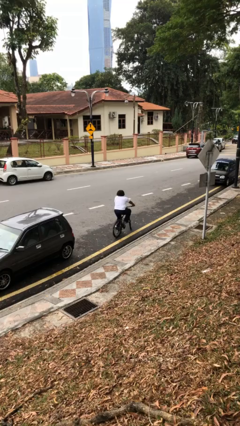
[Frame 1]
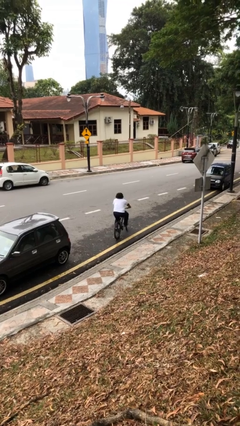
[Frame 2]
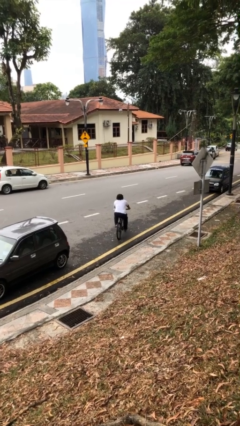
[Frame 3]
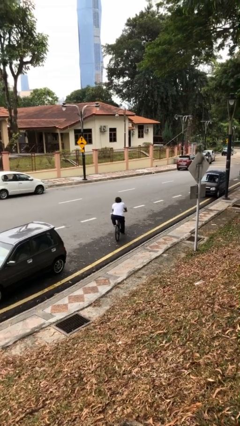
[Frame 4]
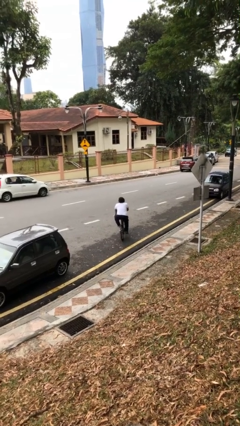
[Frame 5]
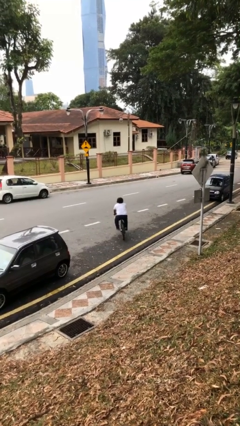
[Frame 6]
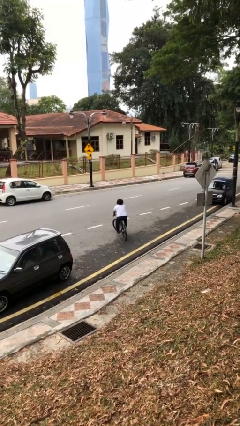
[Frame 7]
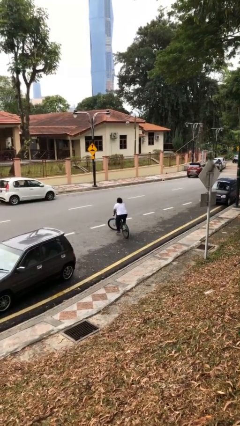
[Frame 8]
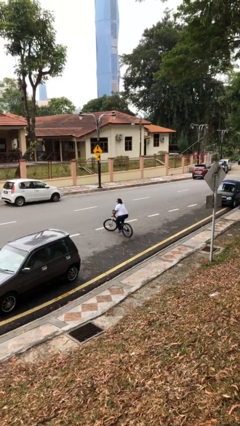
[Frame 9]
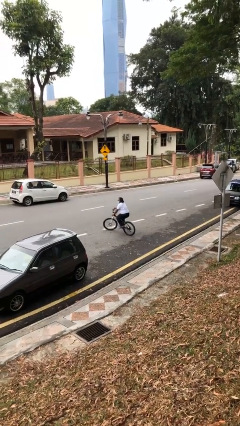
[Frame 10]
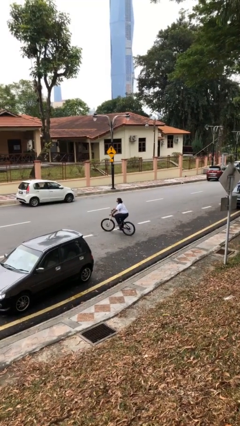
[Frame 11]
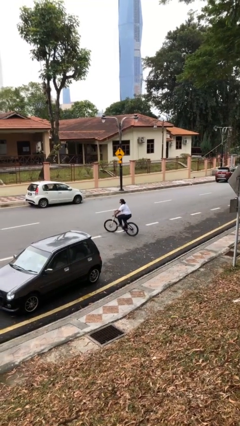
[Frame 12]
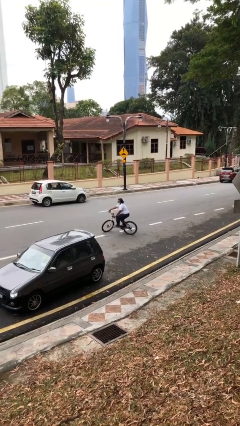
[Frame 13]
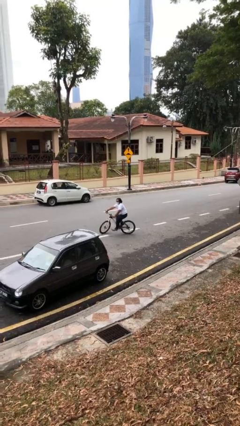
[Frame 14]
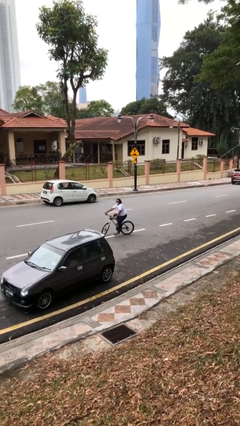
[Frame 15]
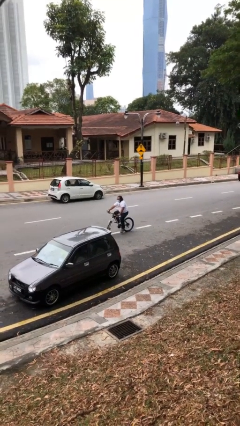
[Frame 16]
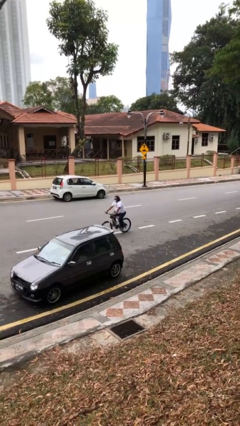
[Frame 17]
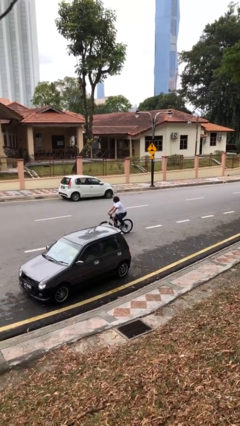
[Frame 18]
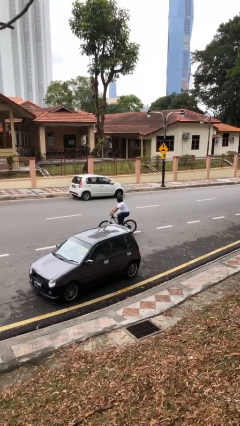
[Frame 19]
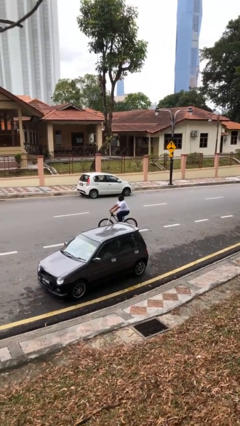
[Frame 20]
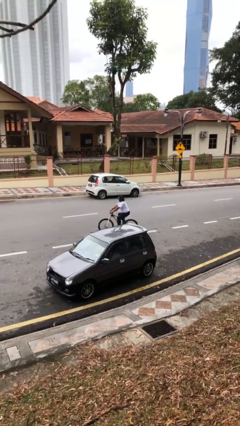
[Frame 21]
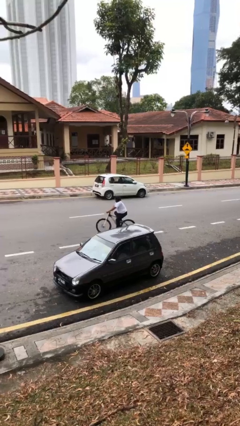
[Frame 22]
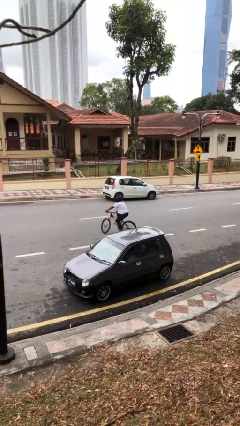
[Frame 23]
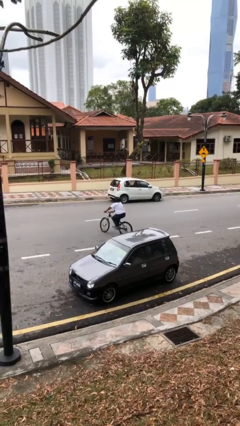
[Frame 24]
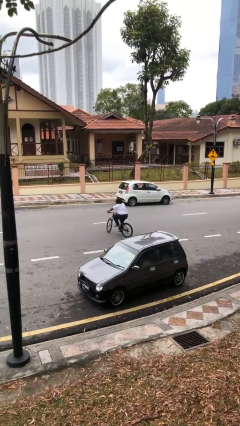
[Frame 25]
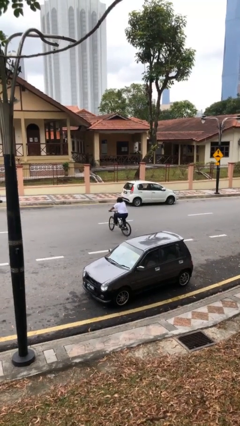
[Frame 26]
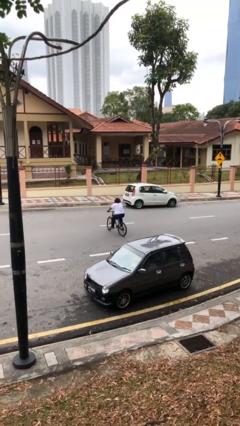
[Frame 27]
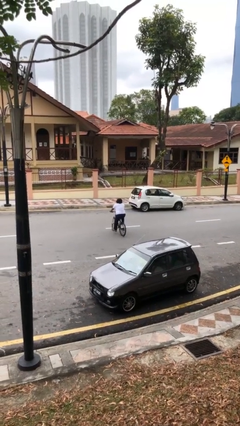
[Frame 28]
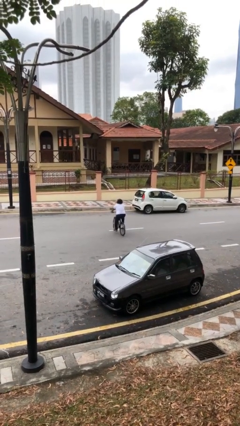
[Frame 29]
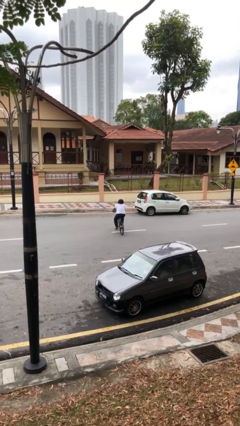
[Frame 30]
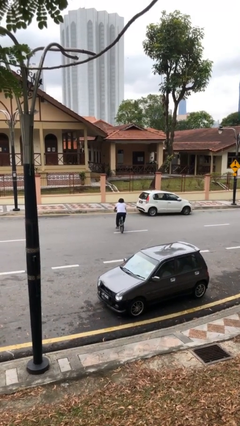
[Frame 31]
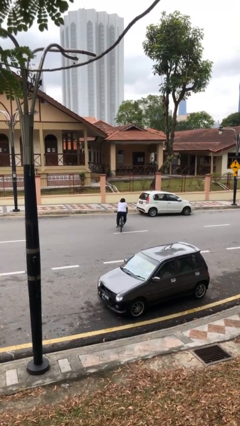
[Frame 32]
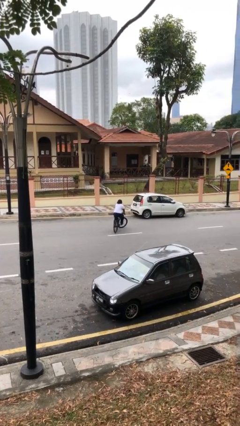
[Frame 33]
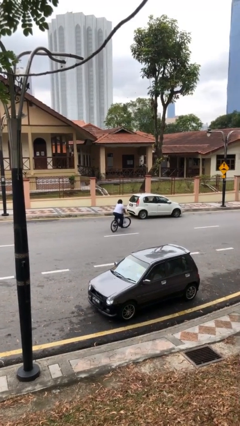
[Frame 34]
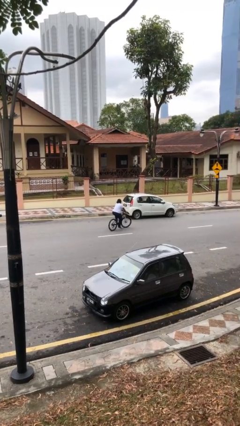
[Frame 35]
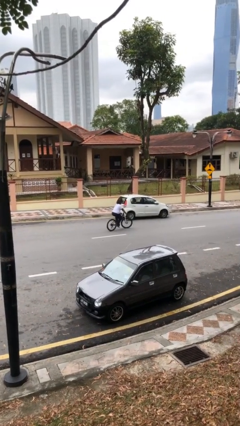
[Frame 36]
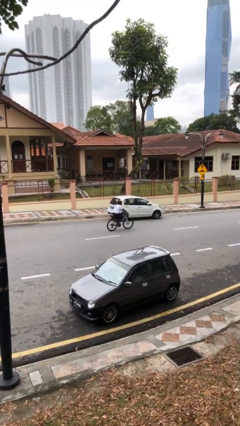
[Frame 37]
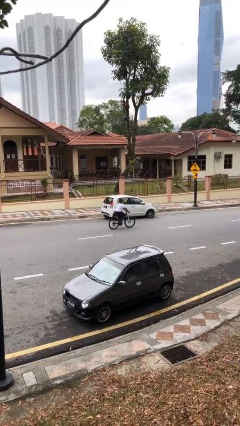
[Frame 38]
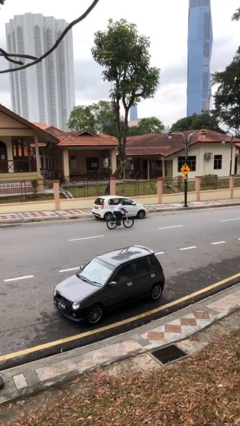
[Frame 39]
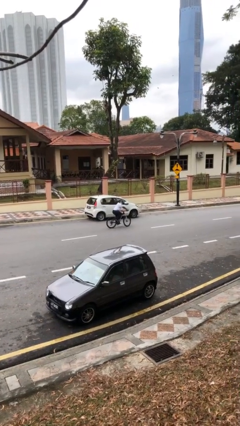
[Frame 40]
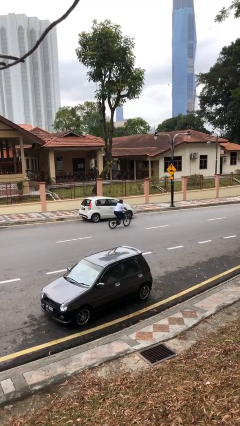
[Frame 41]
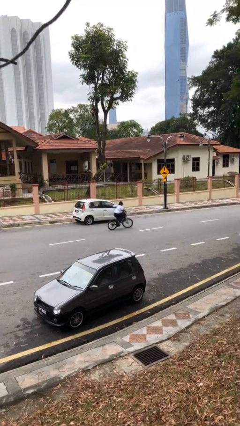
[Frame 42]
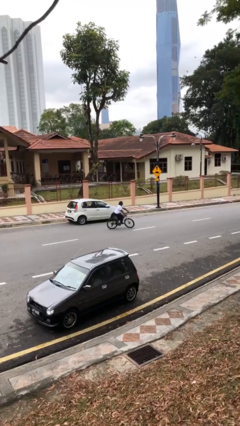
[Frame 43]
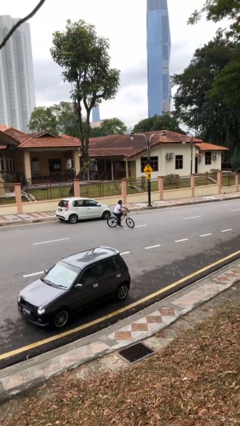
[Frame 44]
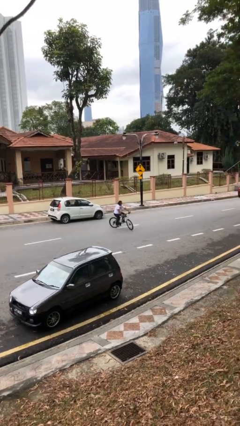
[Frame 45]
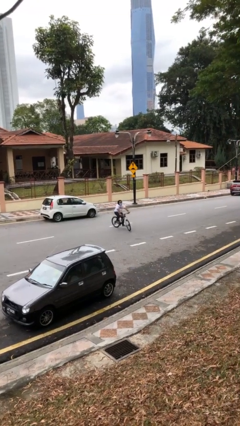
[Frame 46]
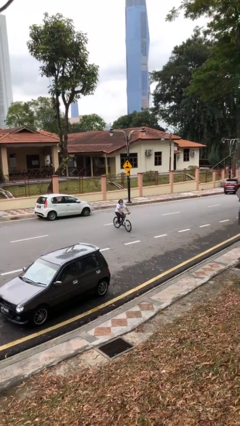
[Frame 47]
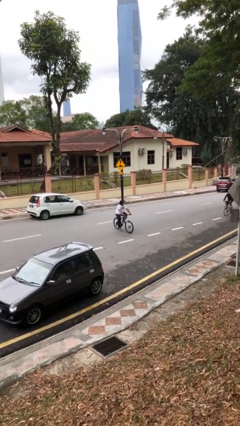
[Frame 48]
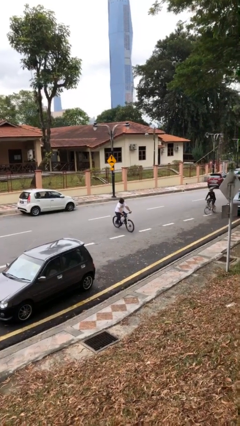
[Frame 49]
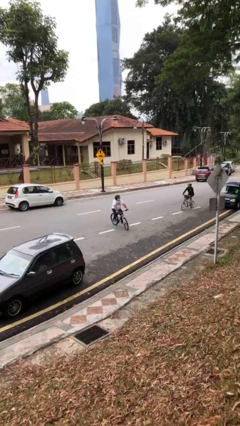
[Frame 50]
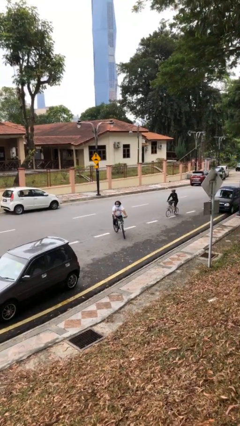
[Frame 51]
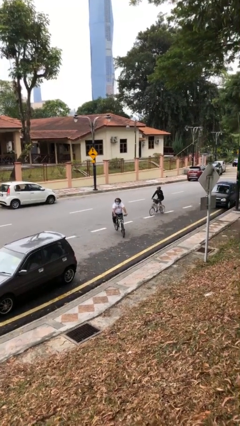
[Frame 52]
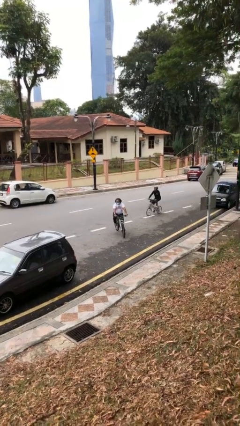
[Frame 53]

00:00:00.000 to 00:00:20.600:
person rides bicycle

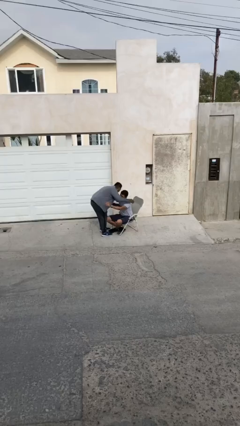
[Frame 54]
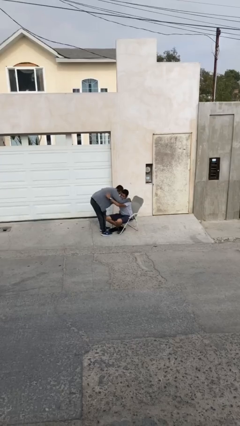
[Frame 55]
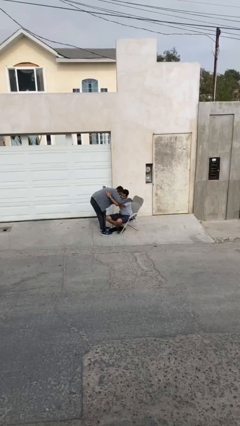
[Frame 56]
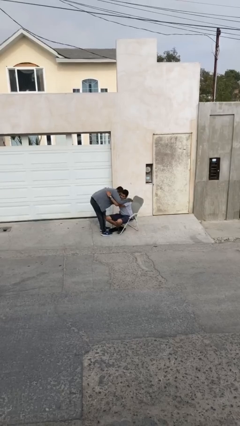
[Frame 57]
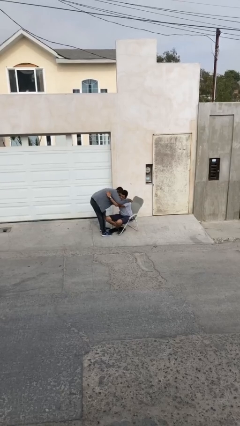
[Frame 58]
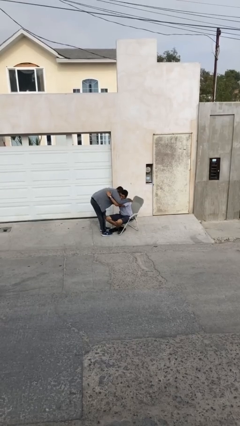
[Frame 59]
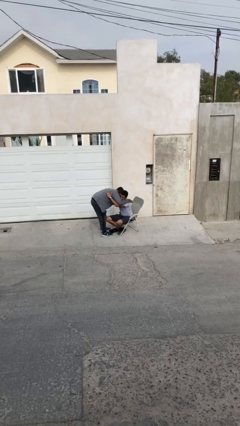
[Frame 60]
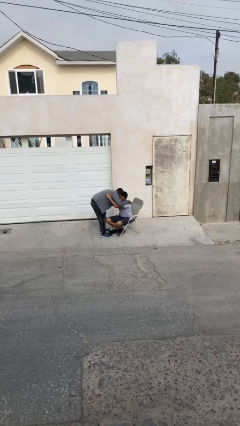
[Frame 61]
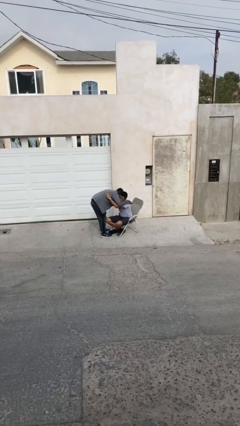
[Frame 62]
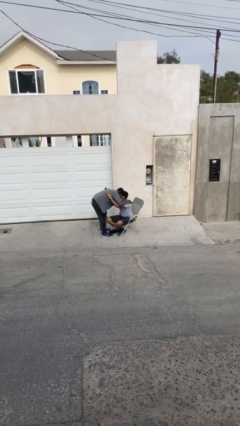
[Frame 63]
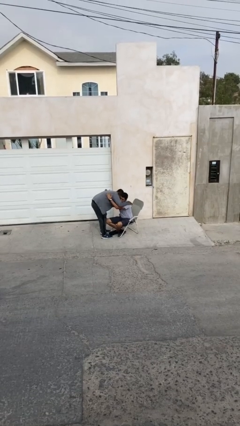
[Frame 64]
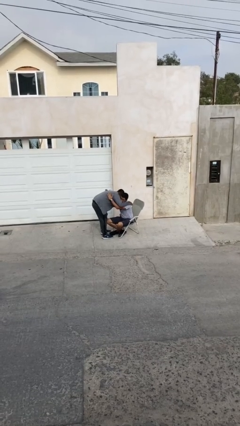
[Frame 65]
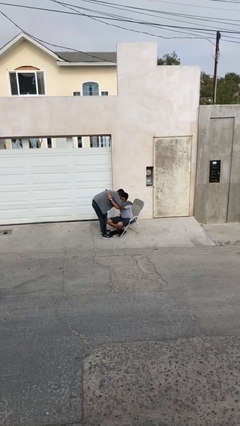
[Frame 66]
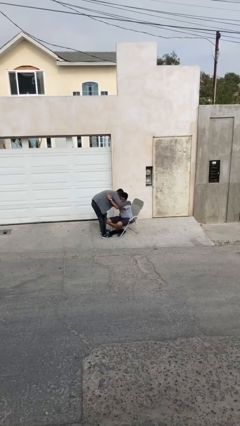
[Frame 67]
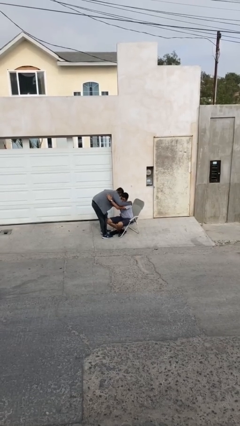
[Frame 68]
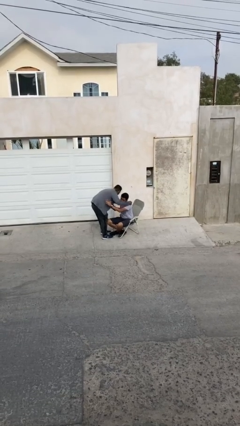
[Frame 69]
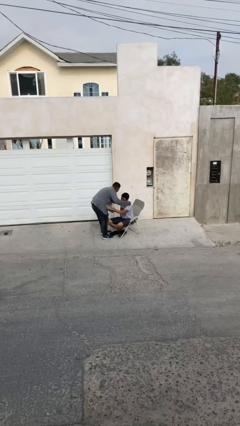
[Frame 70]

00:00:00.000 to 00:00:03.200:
person embraces person

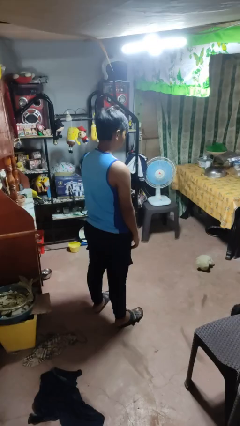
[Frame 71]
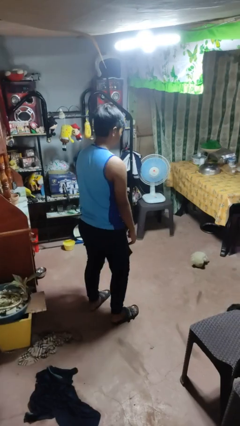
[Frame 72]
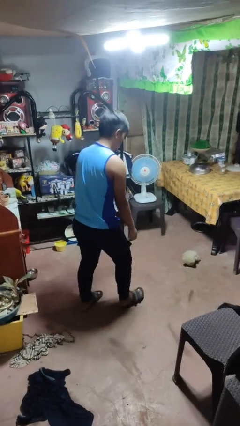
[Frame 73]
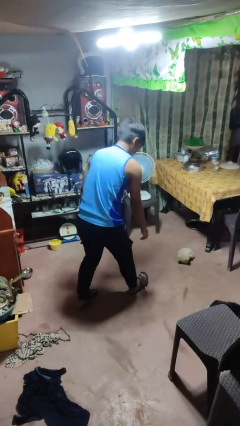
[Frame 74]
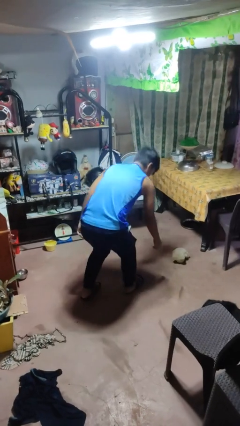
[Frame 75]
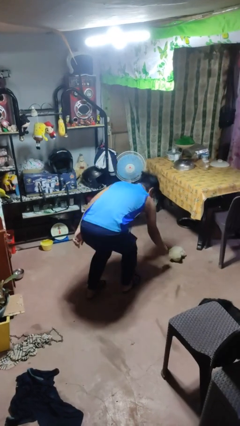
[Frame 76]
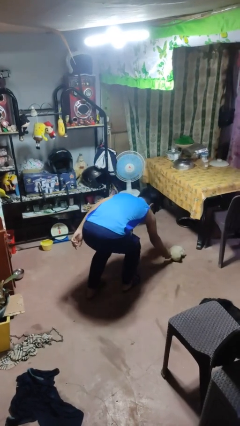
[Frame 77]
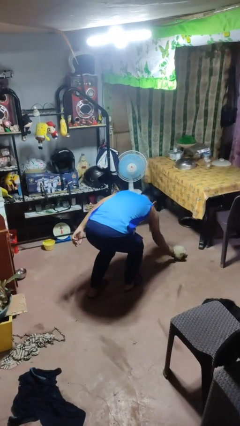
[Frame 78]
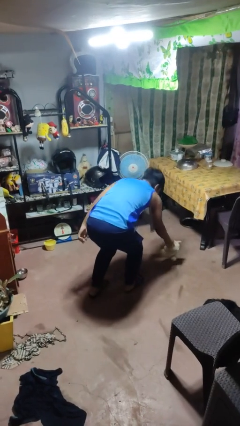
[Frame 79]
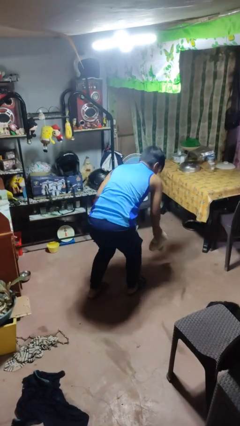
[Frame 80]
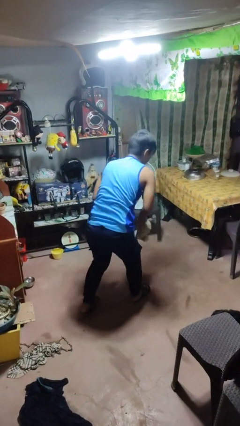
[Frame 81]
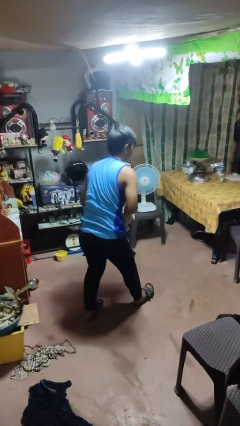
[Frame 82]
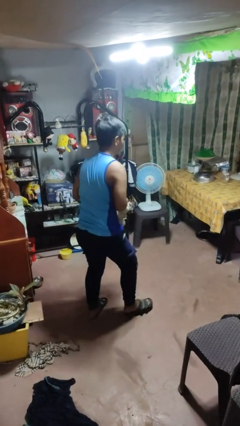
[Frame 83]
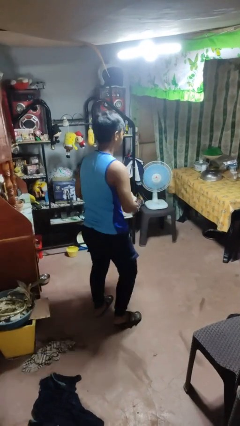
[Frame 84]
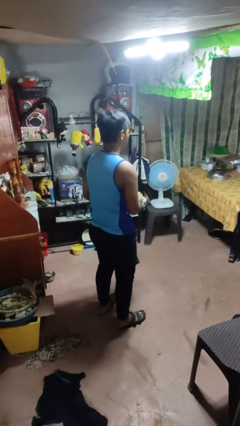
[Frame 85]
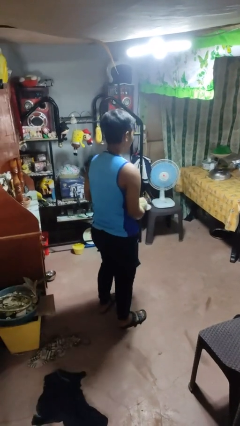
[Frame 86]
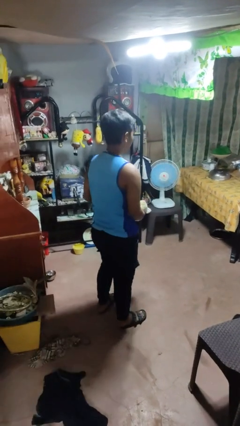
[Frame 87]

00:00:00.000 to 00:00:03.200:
person picks up object from floor

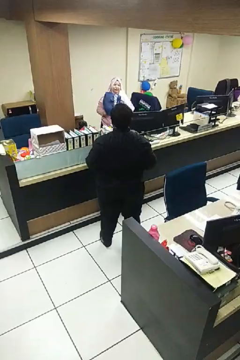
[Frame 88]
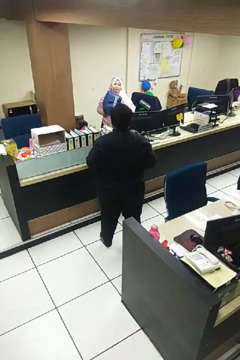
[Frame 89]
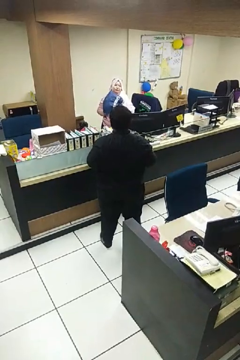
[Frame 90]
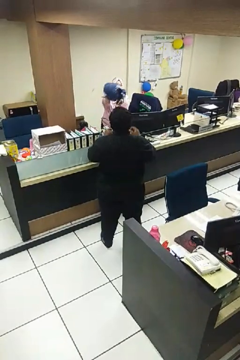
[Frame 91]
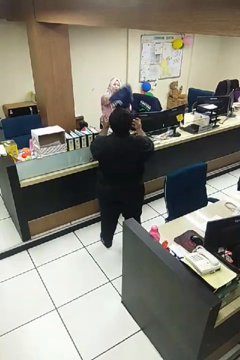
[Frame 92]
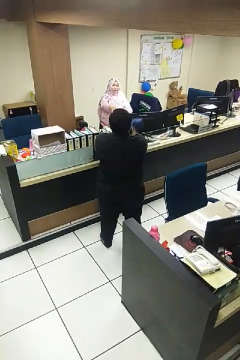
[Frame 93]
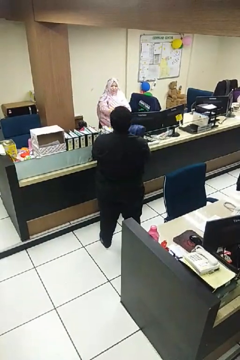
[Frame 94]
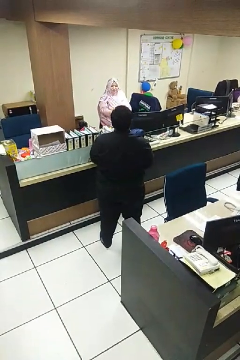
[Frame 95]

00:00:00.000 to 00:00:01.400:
person catches object from person
